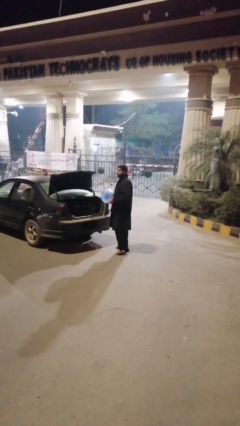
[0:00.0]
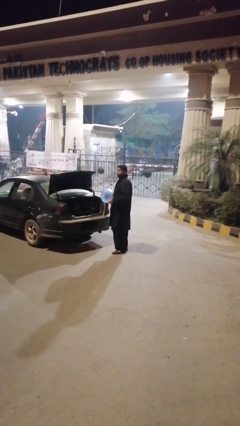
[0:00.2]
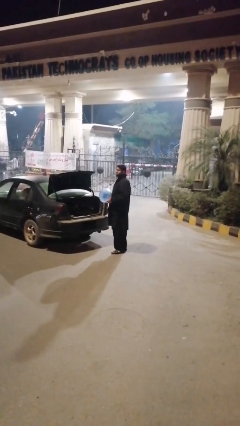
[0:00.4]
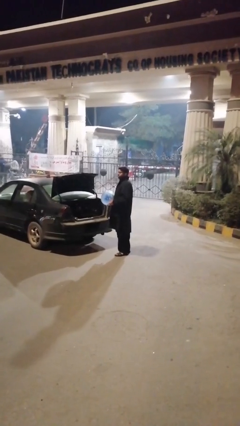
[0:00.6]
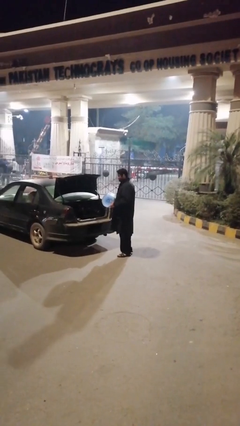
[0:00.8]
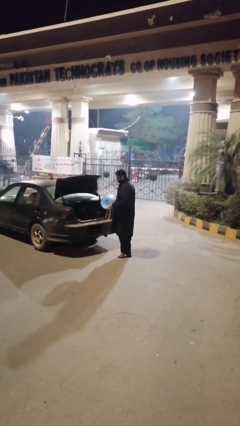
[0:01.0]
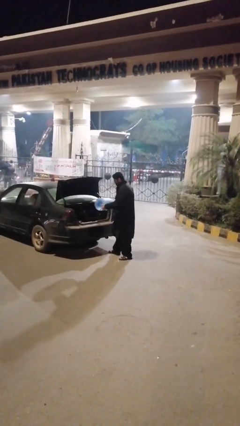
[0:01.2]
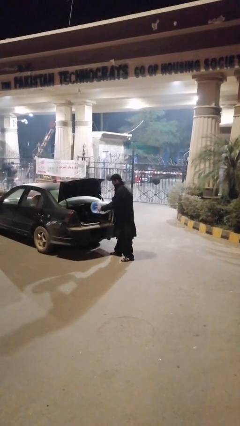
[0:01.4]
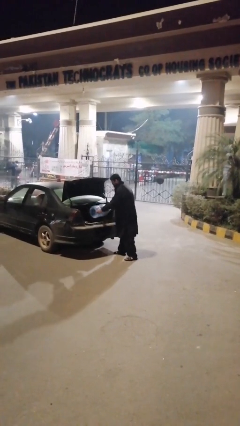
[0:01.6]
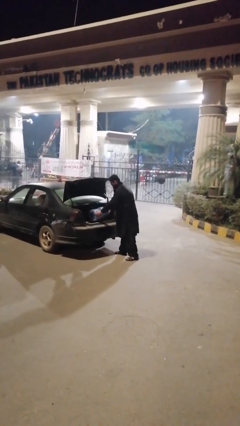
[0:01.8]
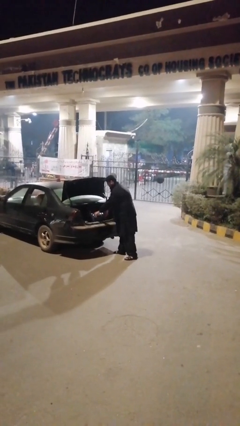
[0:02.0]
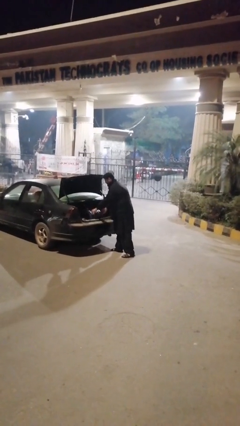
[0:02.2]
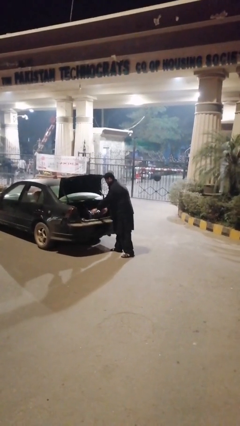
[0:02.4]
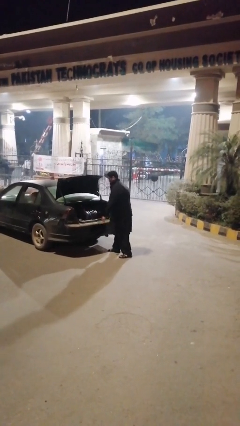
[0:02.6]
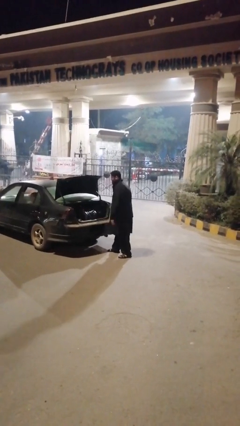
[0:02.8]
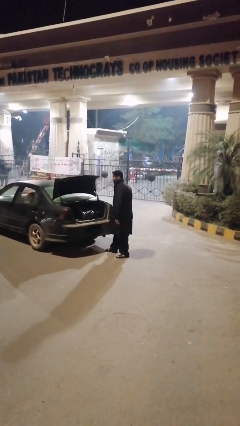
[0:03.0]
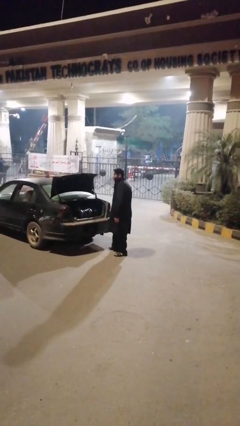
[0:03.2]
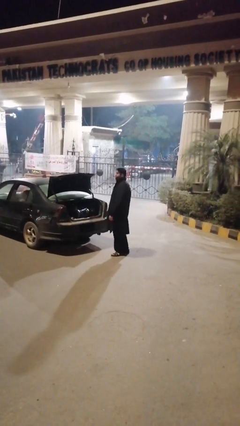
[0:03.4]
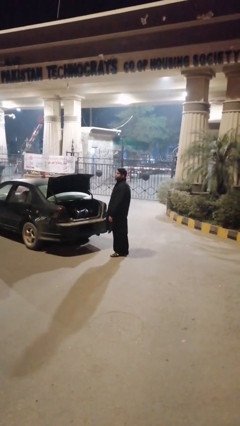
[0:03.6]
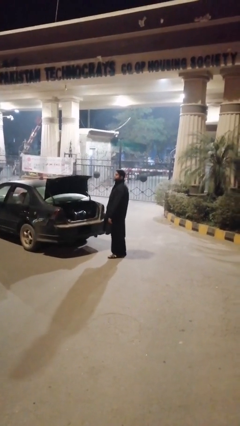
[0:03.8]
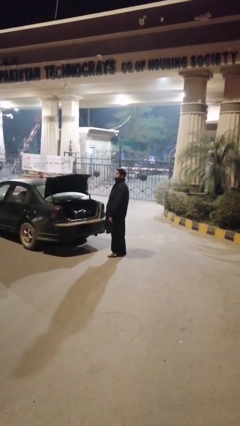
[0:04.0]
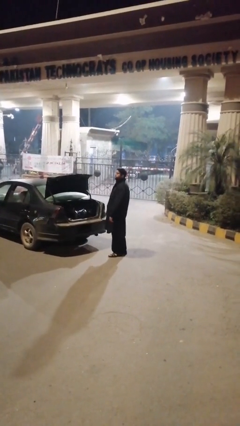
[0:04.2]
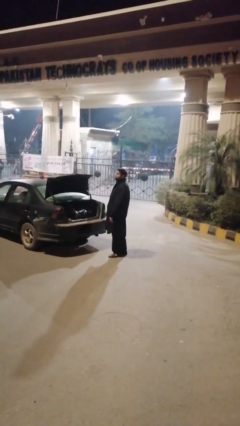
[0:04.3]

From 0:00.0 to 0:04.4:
person loads car

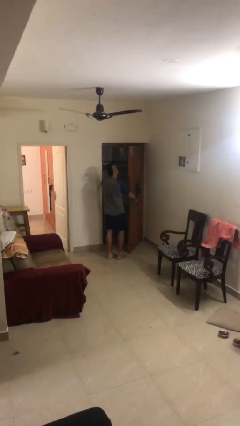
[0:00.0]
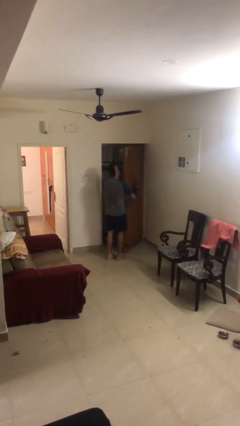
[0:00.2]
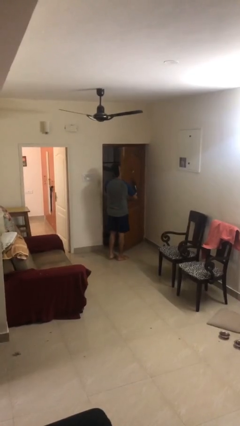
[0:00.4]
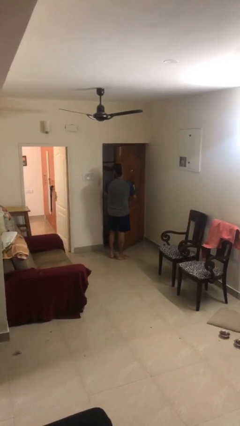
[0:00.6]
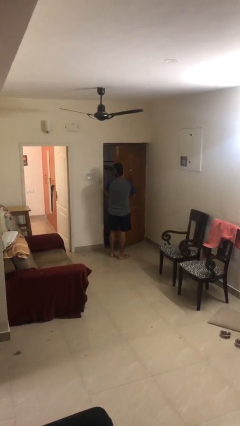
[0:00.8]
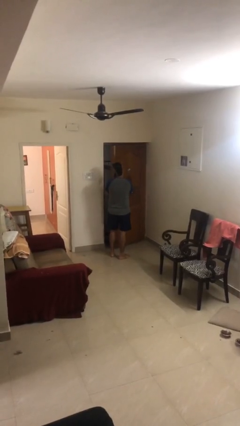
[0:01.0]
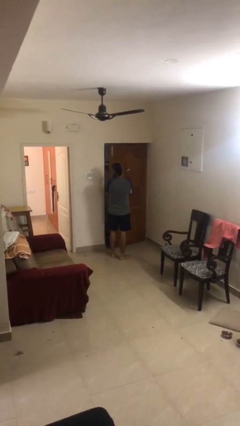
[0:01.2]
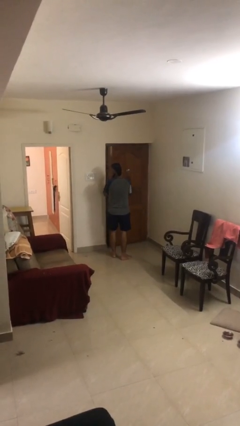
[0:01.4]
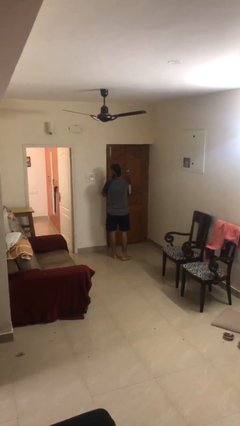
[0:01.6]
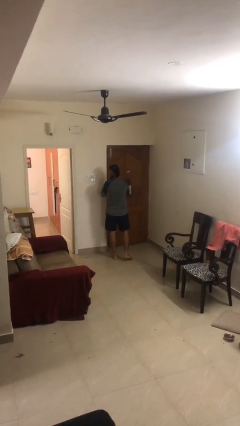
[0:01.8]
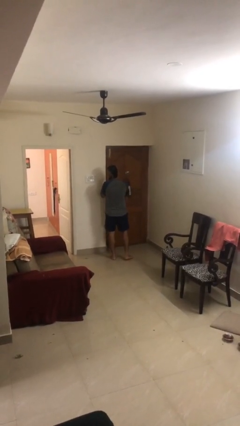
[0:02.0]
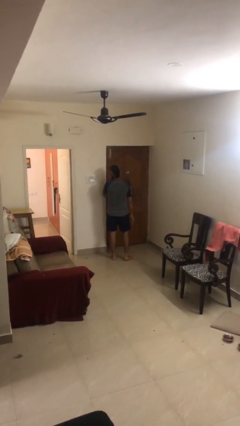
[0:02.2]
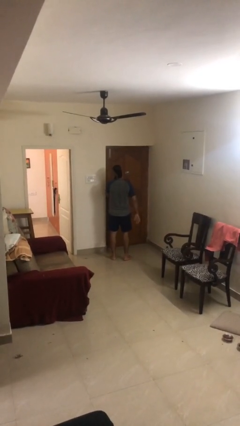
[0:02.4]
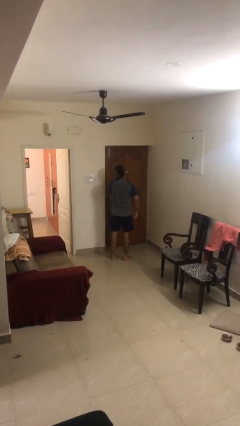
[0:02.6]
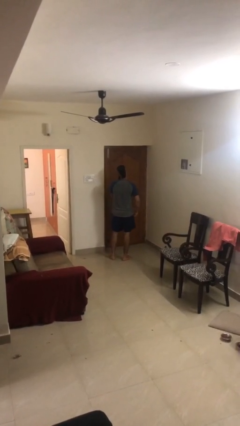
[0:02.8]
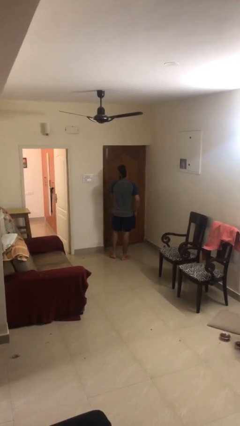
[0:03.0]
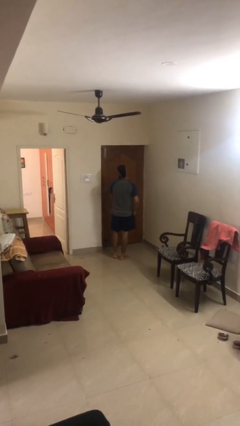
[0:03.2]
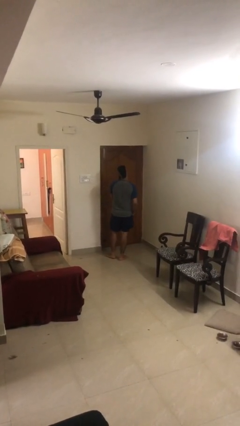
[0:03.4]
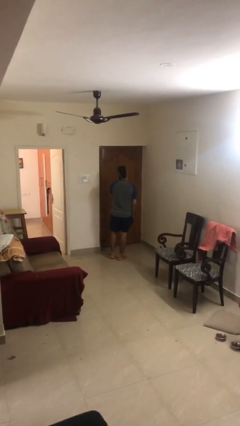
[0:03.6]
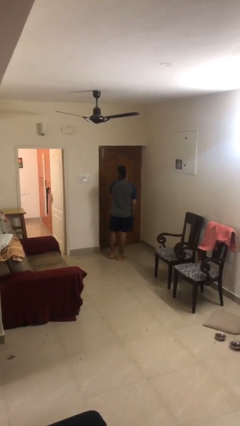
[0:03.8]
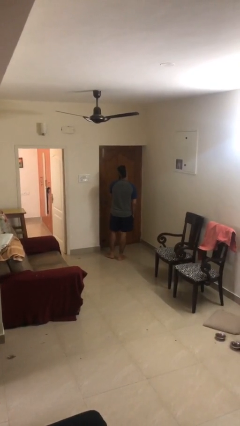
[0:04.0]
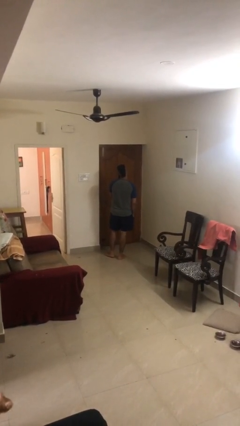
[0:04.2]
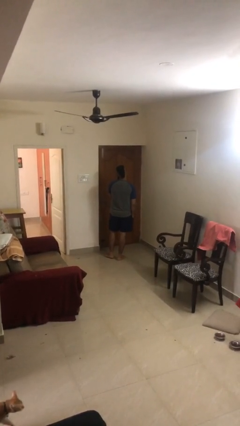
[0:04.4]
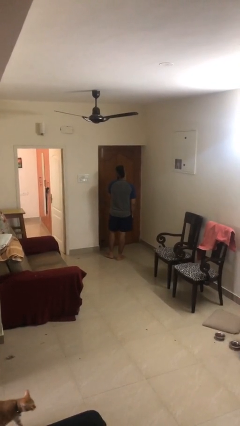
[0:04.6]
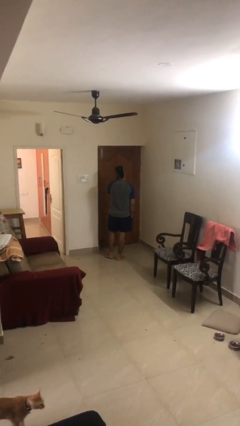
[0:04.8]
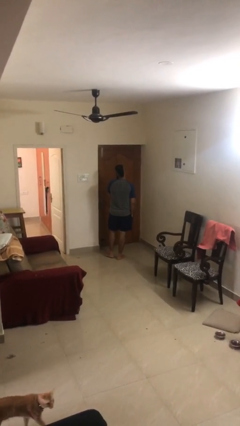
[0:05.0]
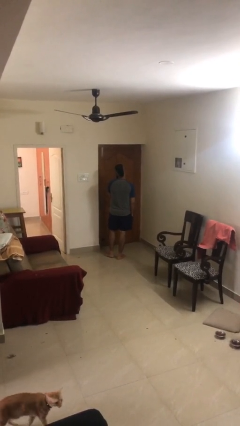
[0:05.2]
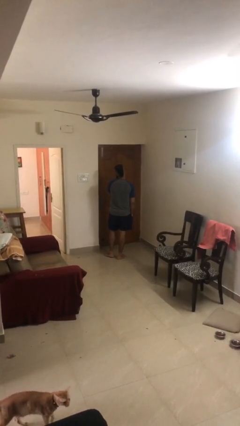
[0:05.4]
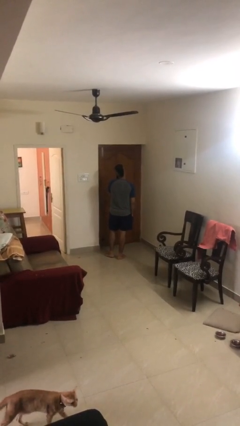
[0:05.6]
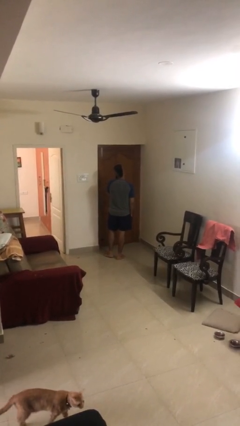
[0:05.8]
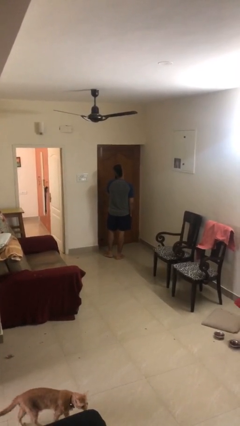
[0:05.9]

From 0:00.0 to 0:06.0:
person closes facility door

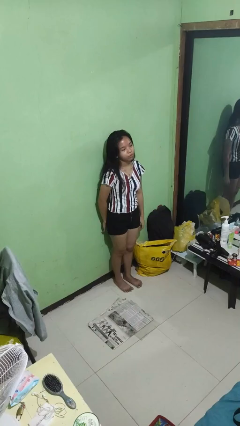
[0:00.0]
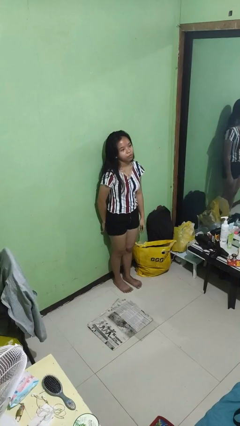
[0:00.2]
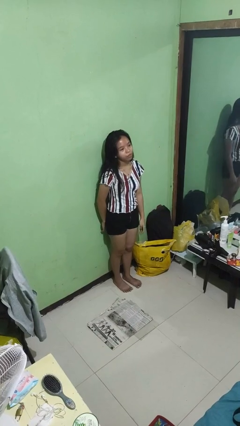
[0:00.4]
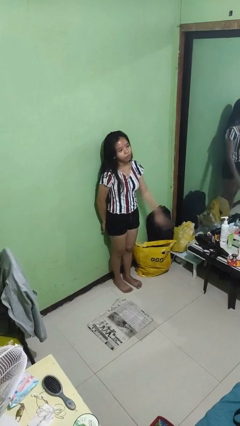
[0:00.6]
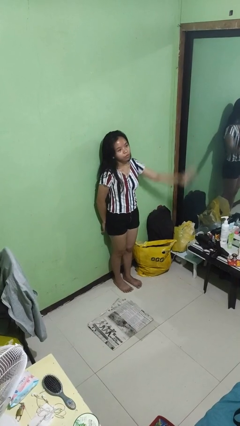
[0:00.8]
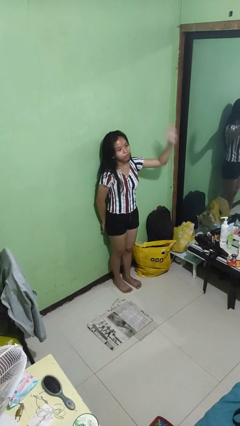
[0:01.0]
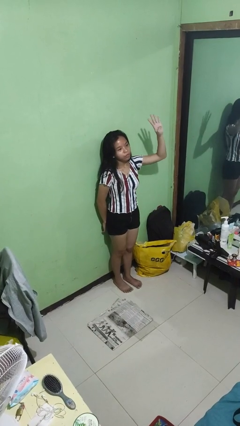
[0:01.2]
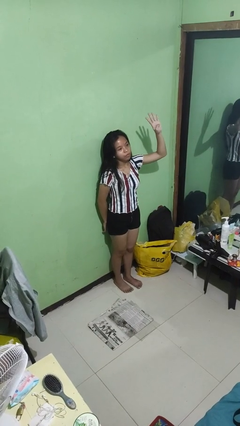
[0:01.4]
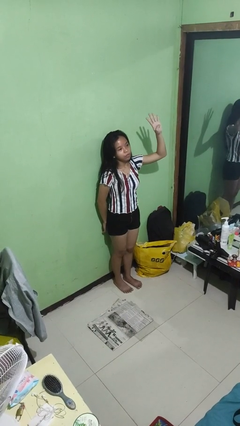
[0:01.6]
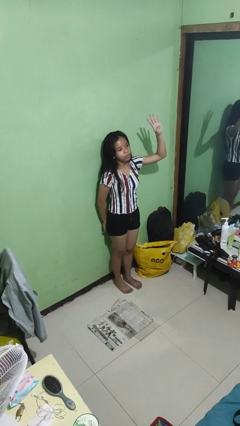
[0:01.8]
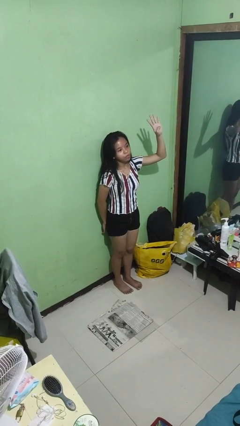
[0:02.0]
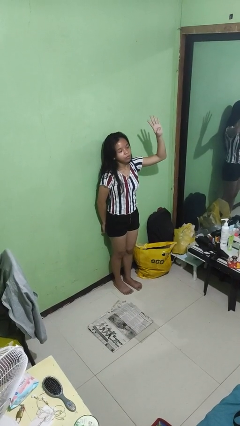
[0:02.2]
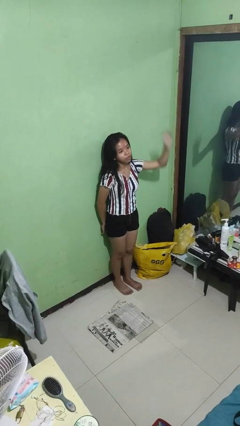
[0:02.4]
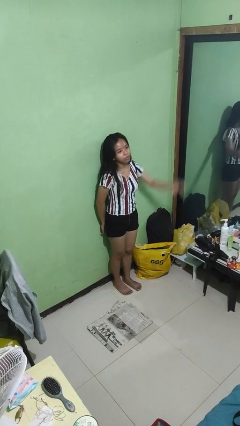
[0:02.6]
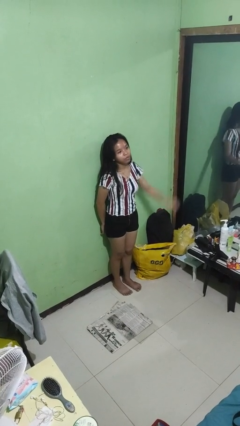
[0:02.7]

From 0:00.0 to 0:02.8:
person gestures number four

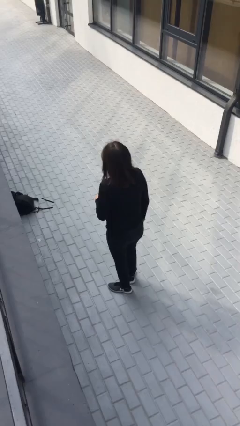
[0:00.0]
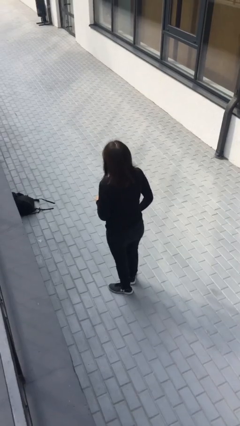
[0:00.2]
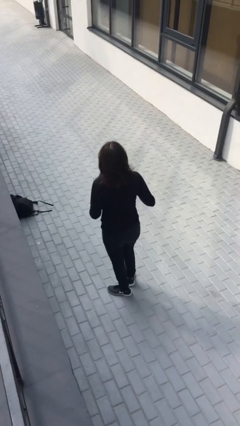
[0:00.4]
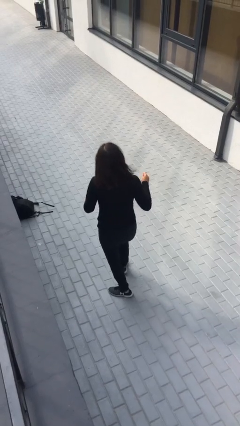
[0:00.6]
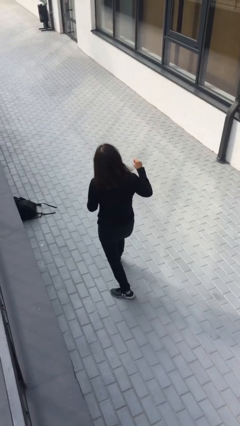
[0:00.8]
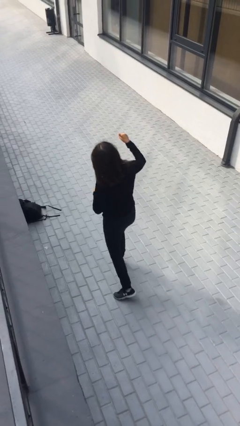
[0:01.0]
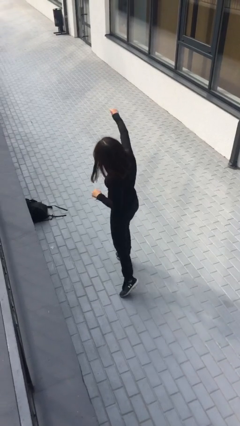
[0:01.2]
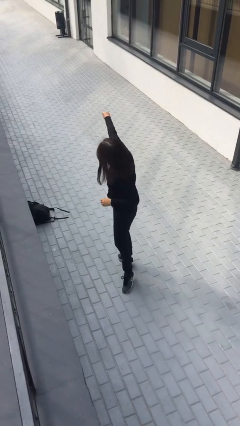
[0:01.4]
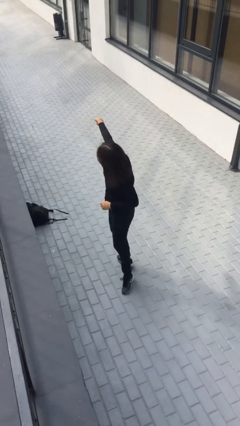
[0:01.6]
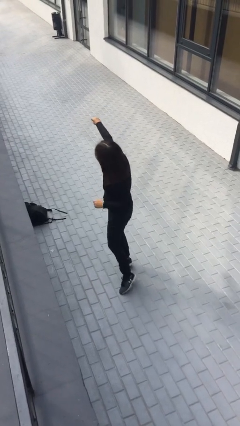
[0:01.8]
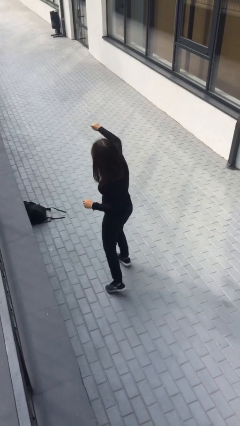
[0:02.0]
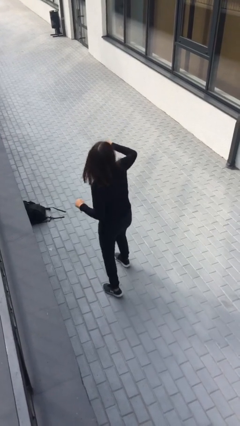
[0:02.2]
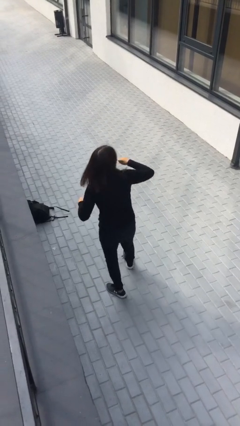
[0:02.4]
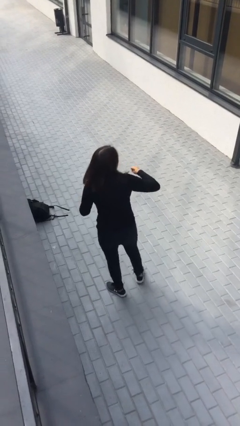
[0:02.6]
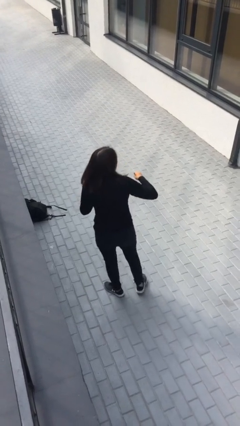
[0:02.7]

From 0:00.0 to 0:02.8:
person punches

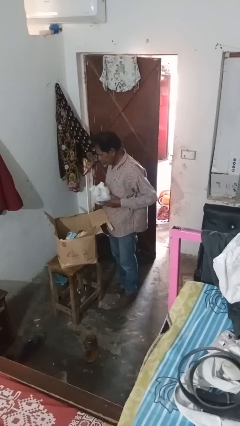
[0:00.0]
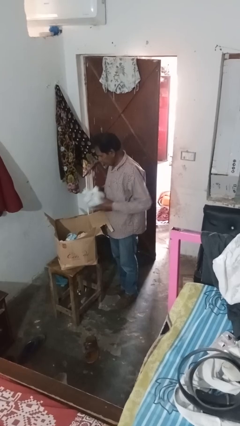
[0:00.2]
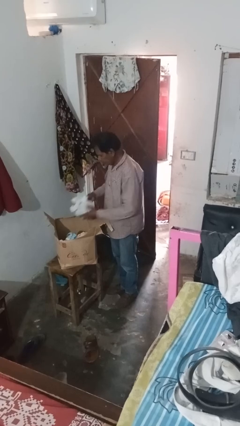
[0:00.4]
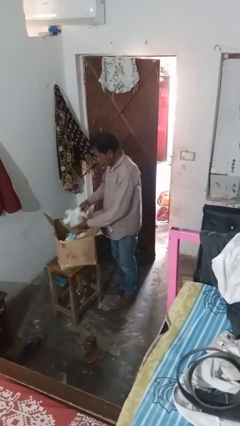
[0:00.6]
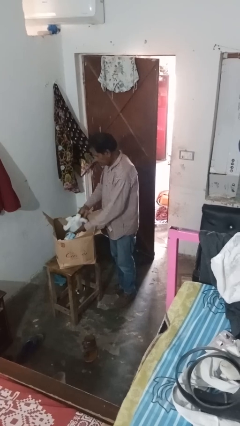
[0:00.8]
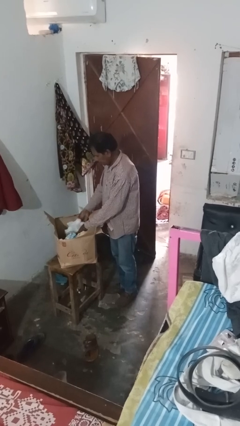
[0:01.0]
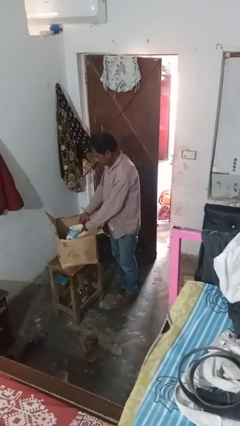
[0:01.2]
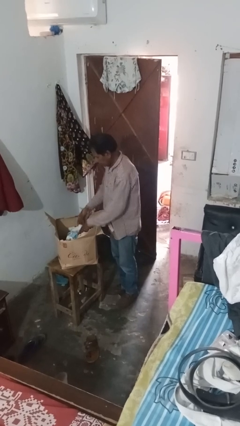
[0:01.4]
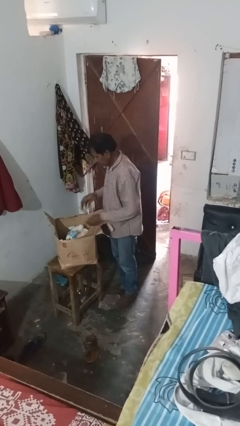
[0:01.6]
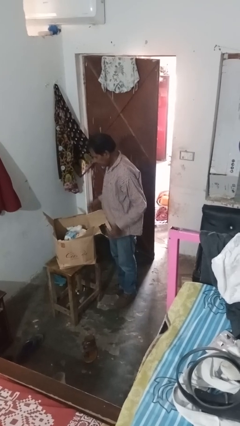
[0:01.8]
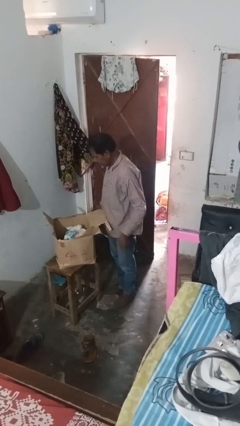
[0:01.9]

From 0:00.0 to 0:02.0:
person puts object into box
